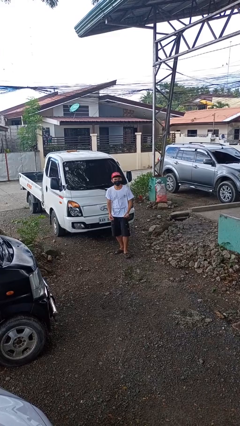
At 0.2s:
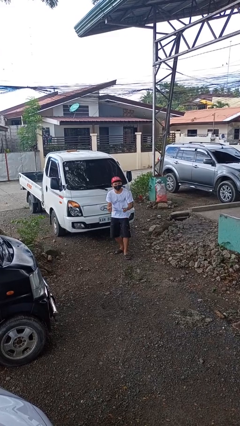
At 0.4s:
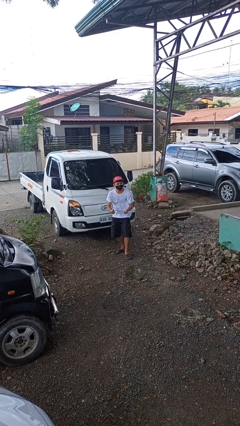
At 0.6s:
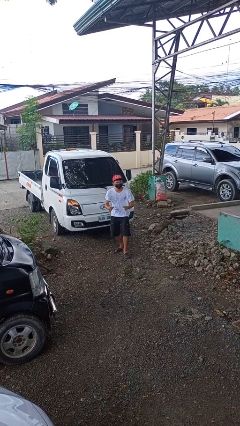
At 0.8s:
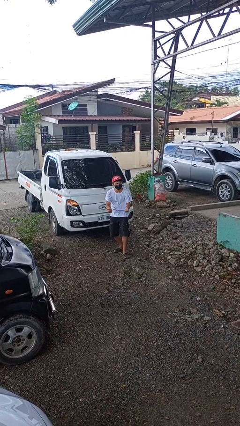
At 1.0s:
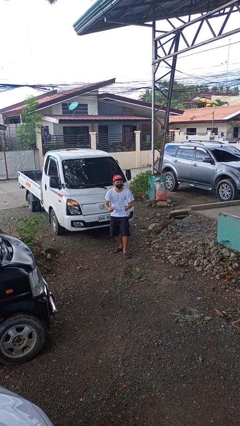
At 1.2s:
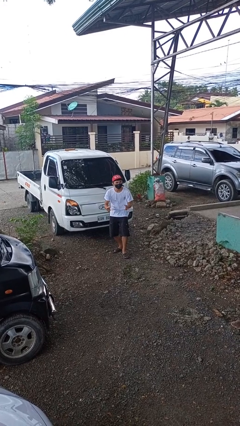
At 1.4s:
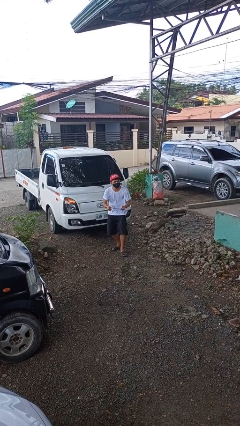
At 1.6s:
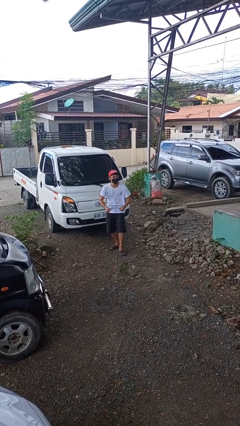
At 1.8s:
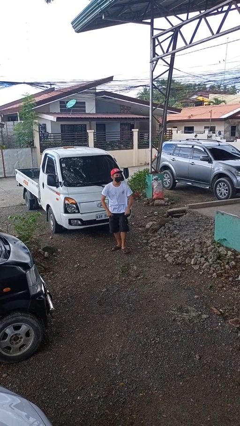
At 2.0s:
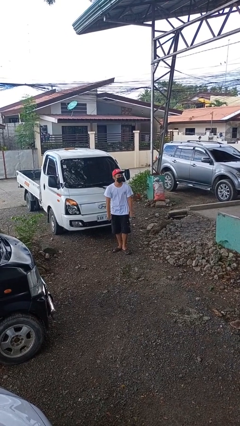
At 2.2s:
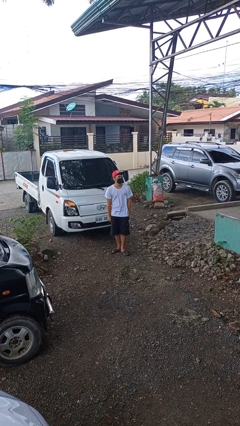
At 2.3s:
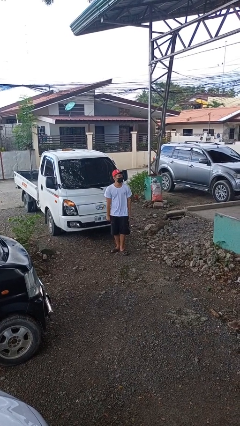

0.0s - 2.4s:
person snaps fingers

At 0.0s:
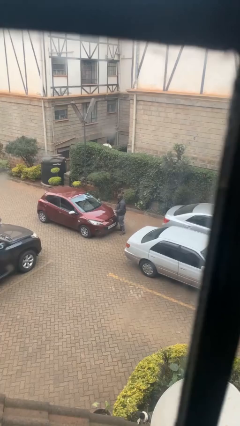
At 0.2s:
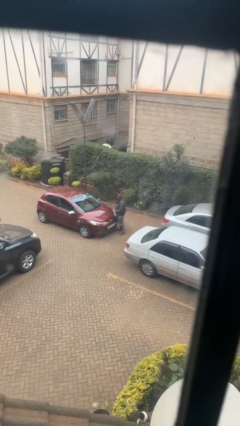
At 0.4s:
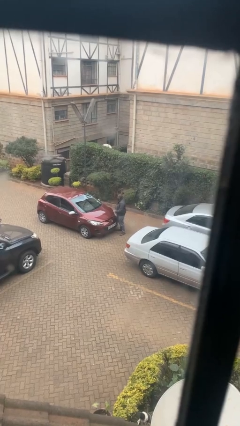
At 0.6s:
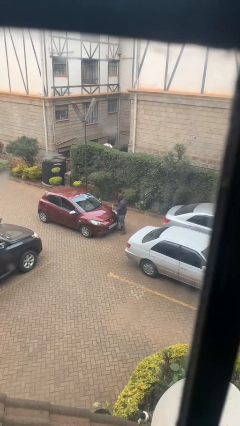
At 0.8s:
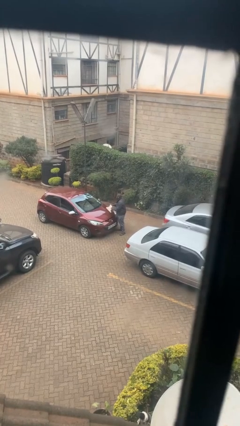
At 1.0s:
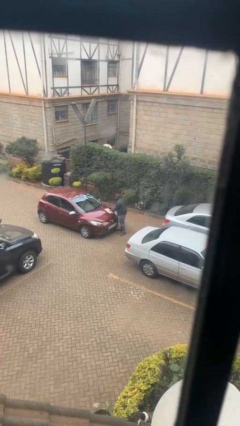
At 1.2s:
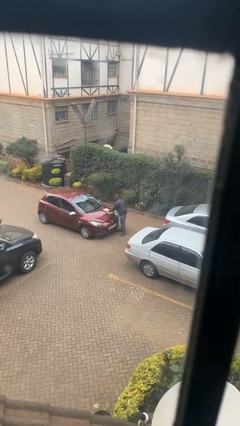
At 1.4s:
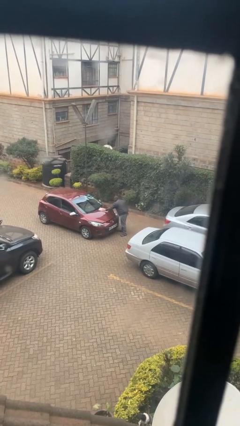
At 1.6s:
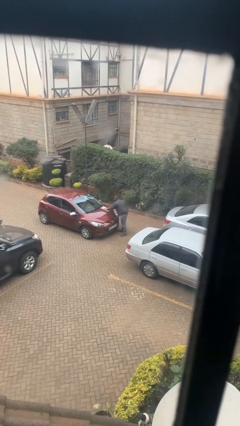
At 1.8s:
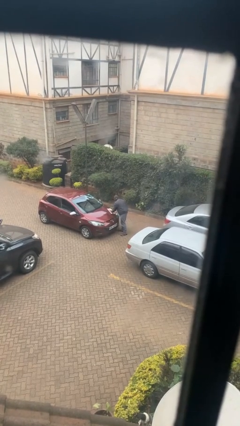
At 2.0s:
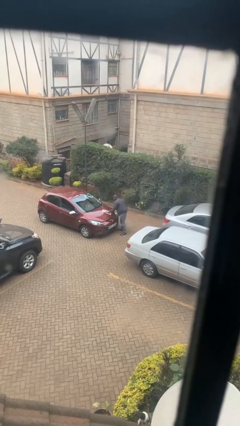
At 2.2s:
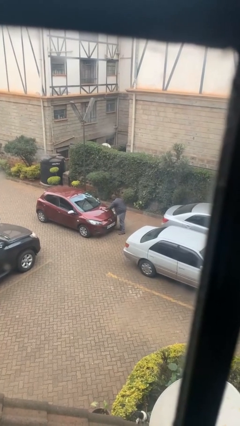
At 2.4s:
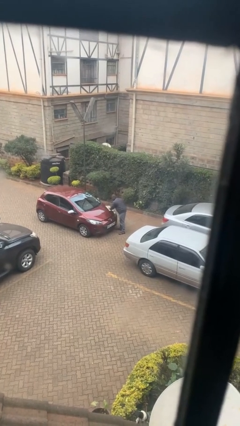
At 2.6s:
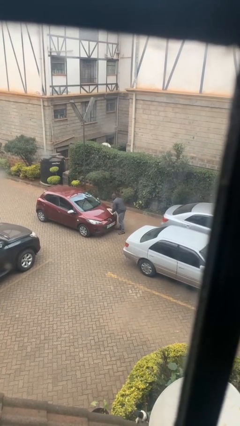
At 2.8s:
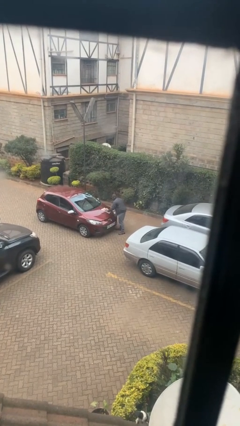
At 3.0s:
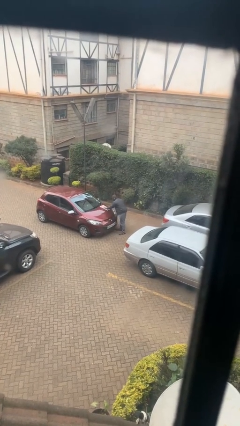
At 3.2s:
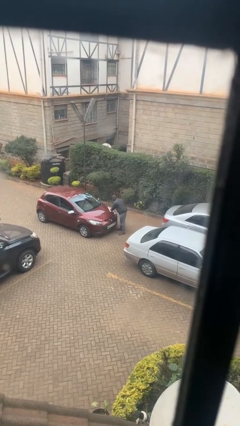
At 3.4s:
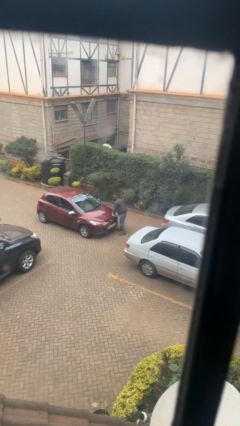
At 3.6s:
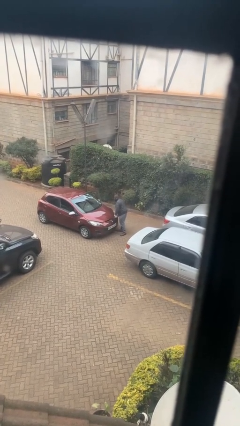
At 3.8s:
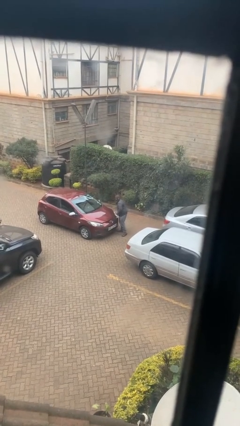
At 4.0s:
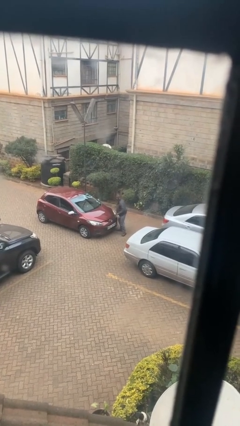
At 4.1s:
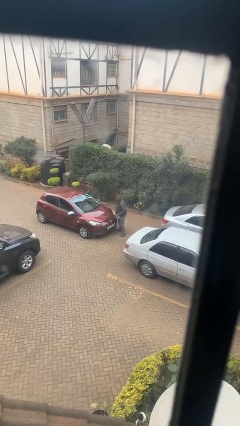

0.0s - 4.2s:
person polishes car with rag

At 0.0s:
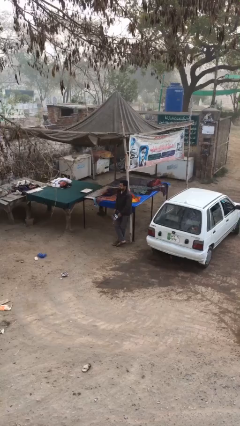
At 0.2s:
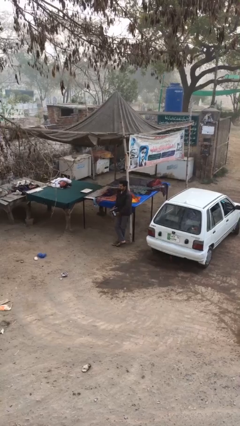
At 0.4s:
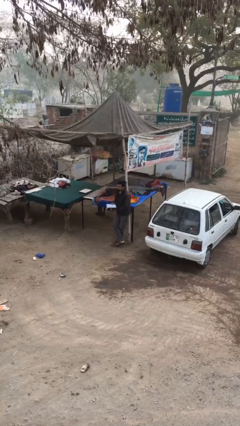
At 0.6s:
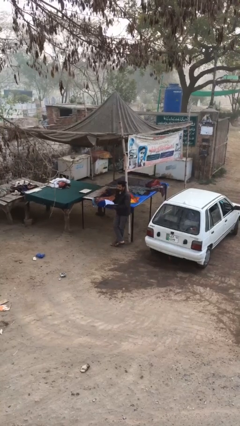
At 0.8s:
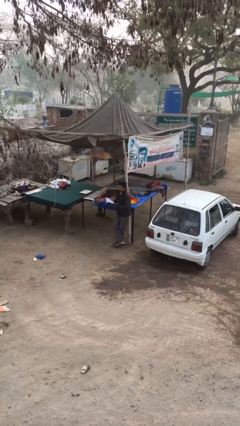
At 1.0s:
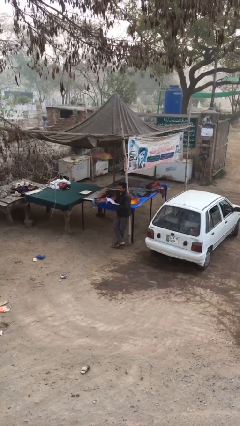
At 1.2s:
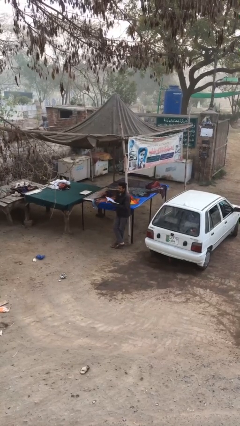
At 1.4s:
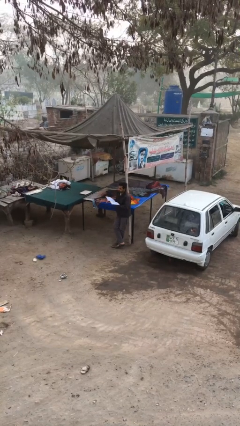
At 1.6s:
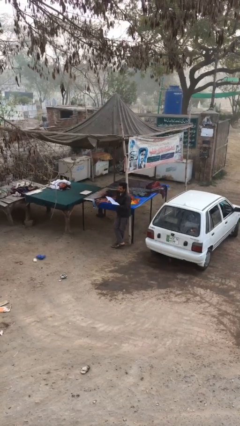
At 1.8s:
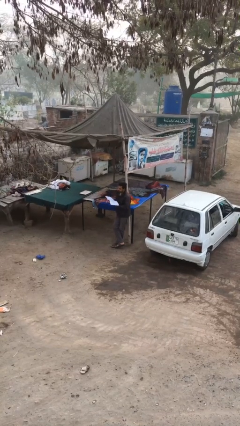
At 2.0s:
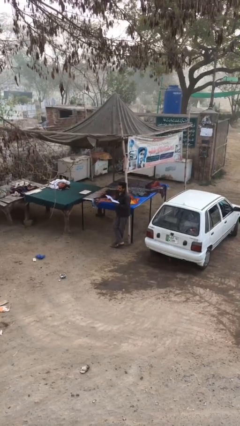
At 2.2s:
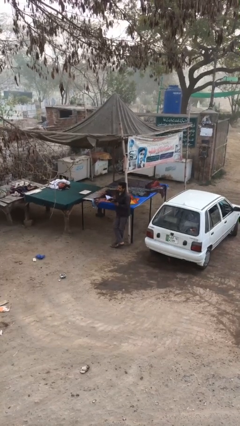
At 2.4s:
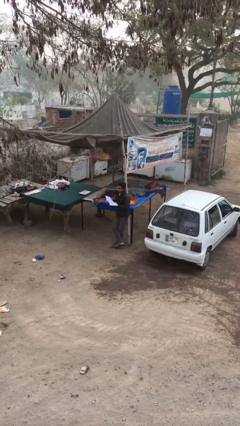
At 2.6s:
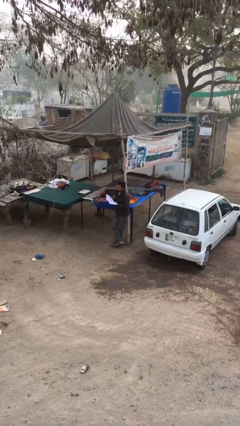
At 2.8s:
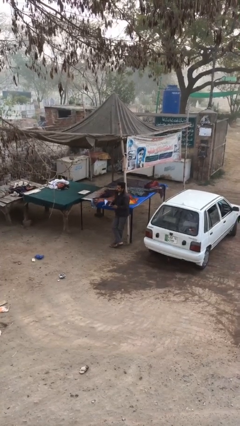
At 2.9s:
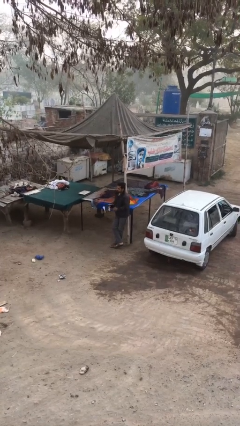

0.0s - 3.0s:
person reads document

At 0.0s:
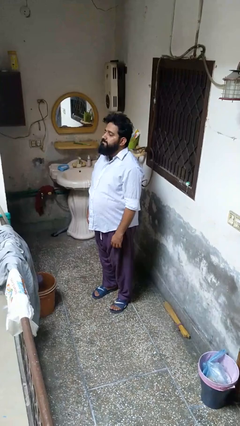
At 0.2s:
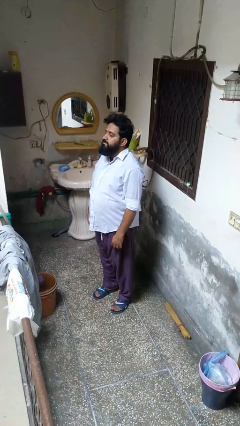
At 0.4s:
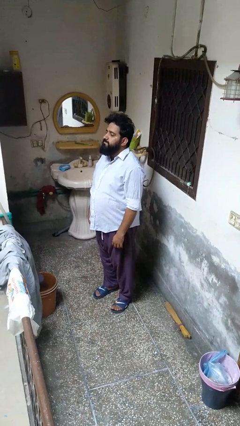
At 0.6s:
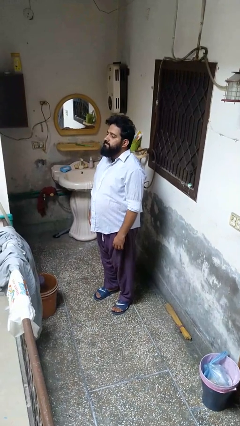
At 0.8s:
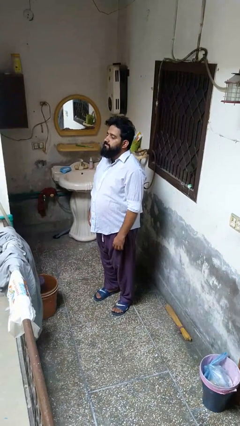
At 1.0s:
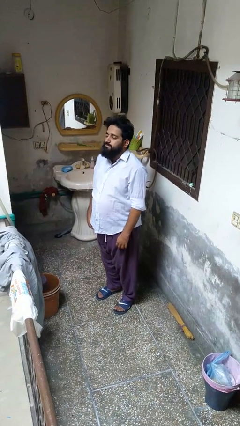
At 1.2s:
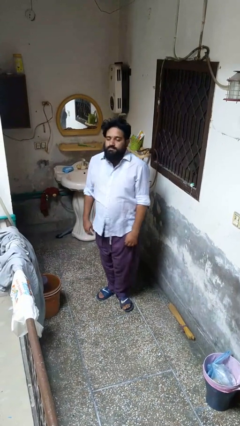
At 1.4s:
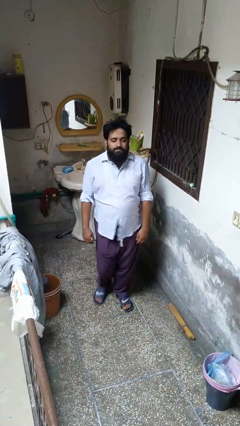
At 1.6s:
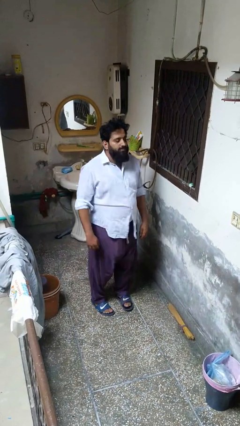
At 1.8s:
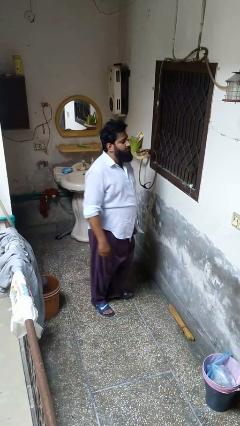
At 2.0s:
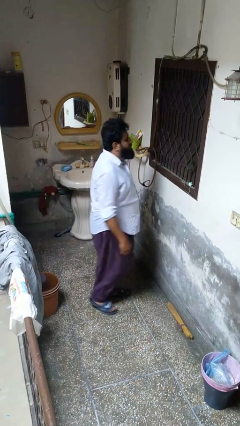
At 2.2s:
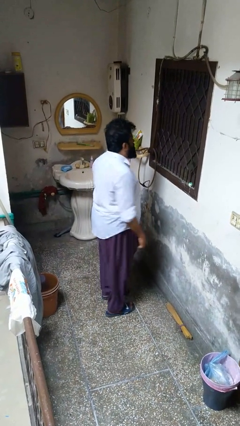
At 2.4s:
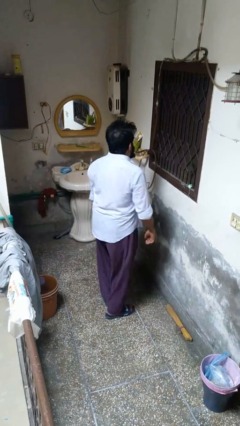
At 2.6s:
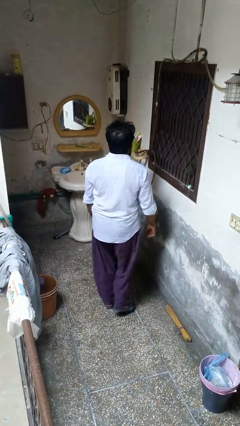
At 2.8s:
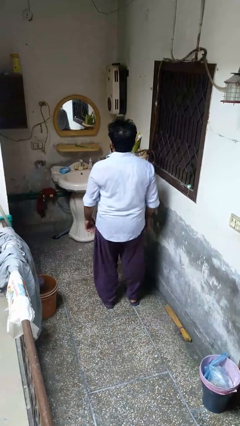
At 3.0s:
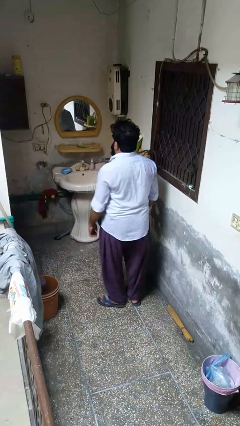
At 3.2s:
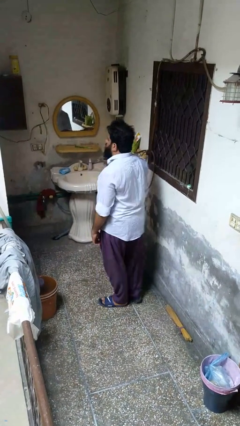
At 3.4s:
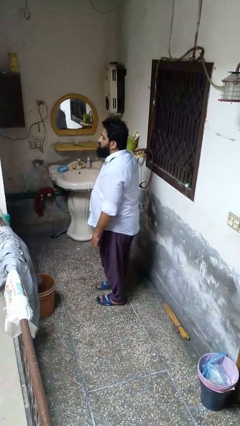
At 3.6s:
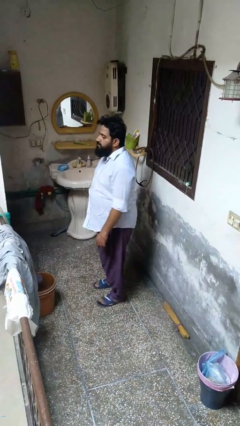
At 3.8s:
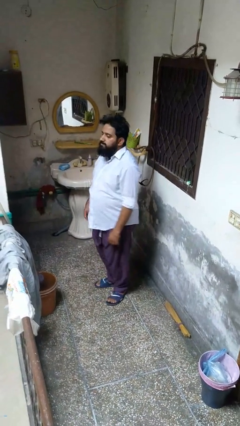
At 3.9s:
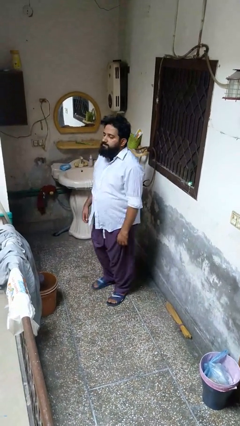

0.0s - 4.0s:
person twirls

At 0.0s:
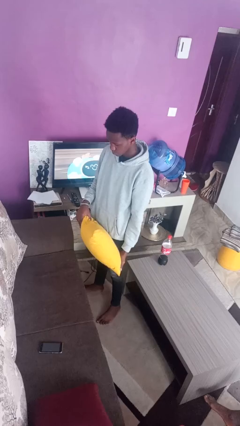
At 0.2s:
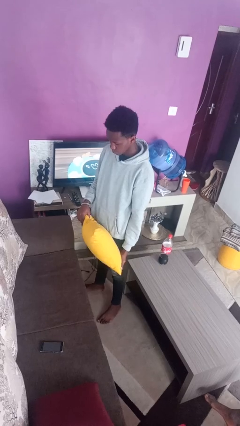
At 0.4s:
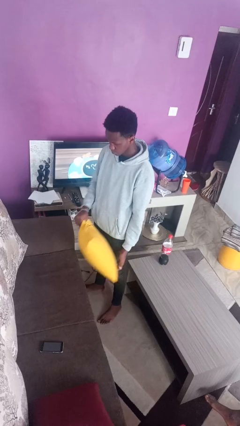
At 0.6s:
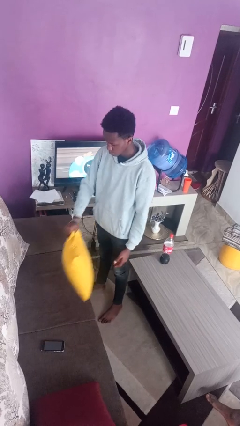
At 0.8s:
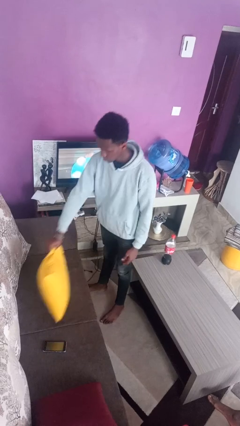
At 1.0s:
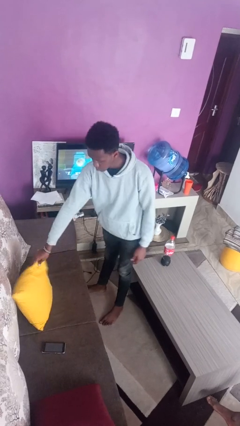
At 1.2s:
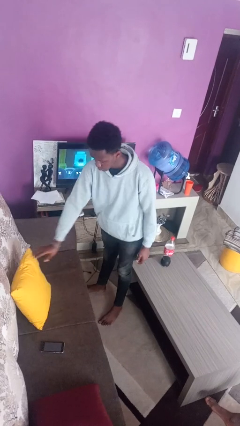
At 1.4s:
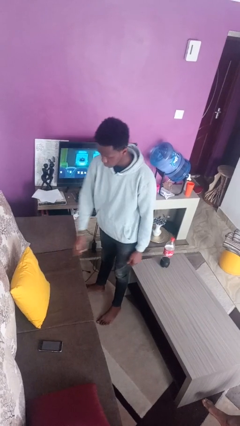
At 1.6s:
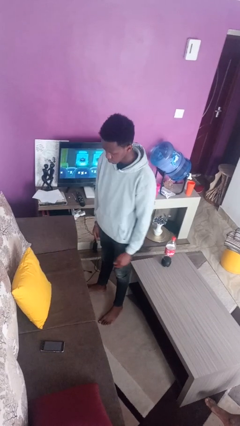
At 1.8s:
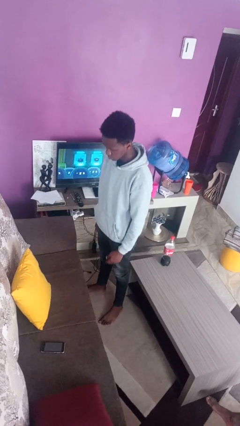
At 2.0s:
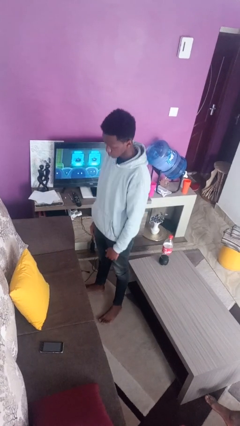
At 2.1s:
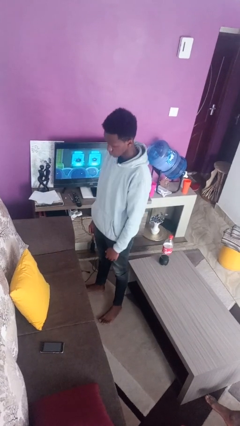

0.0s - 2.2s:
person puts down object on couch

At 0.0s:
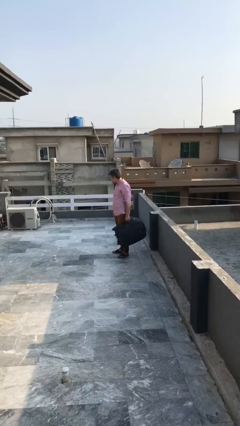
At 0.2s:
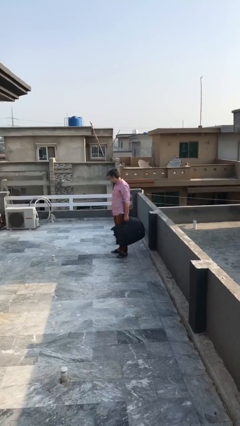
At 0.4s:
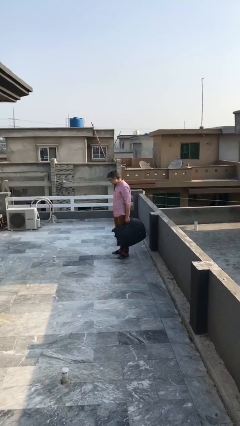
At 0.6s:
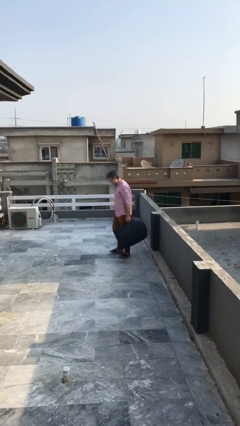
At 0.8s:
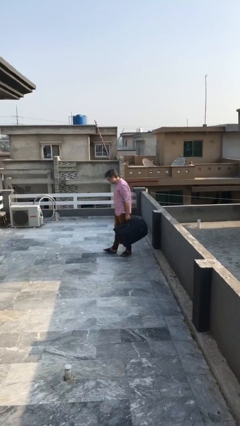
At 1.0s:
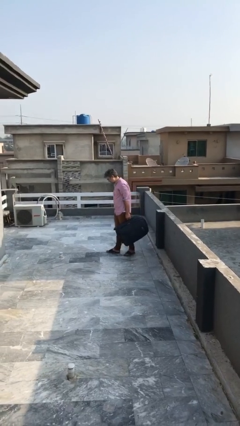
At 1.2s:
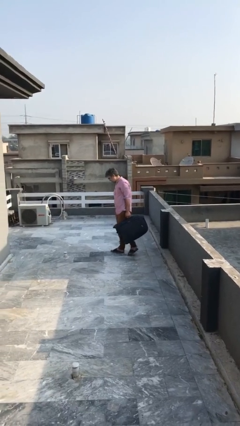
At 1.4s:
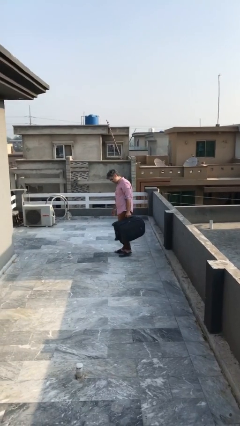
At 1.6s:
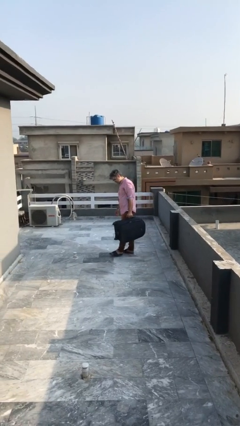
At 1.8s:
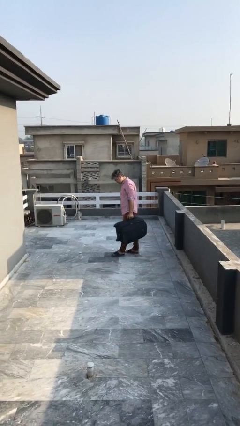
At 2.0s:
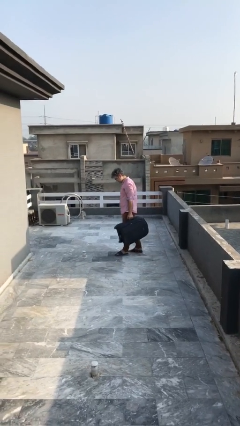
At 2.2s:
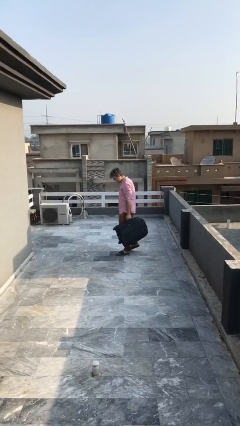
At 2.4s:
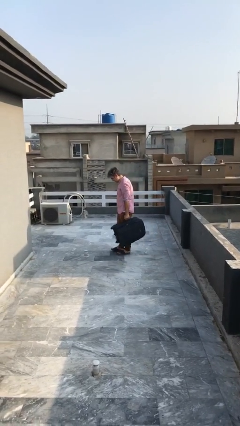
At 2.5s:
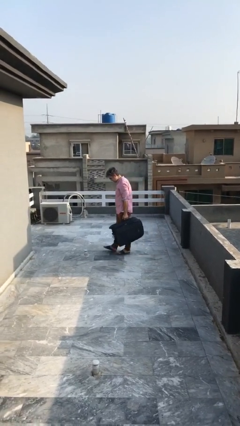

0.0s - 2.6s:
person carries heavy object
